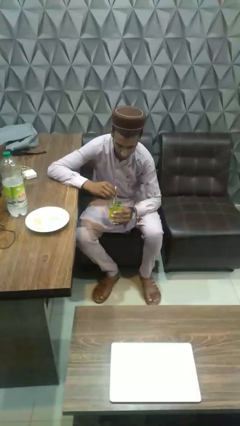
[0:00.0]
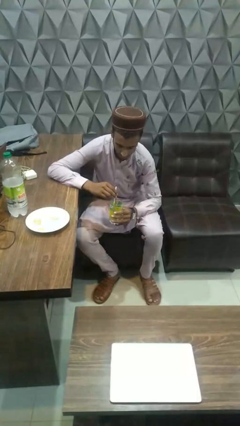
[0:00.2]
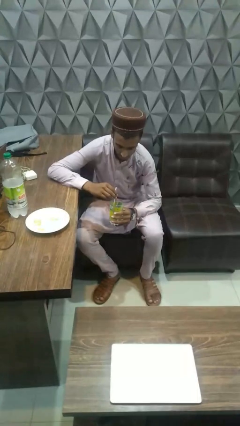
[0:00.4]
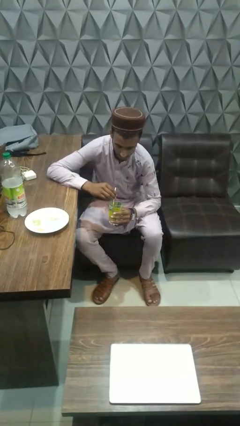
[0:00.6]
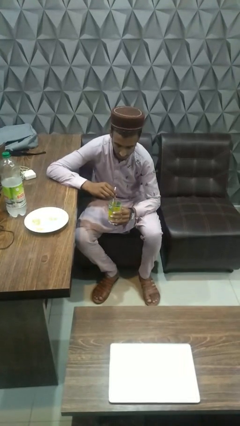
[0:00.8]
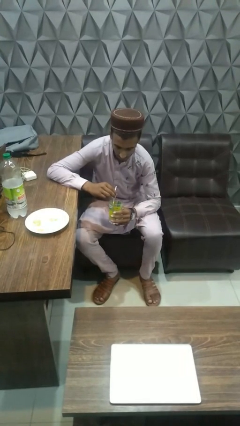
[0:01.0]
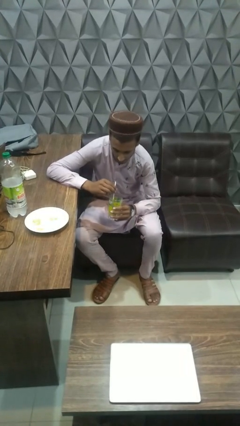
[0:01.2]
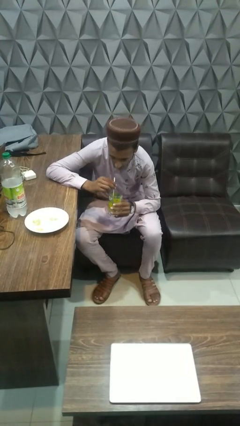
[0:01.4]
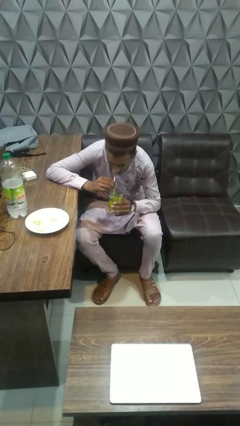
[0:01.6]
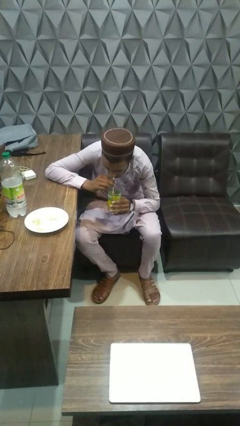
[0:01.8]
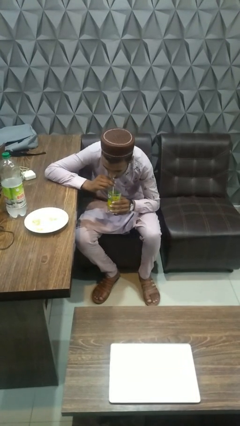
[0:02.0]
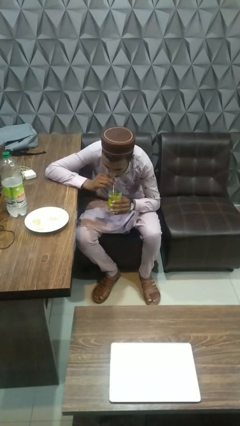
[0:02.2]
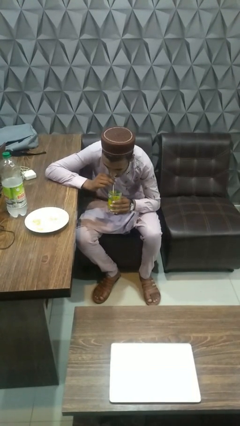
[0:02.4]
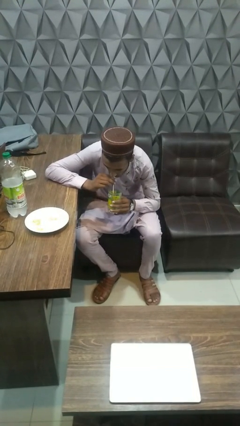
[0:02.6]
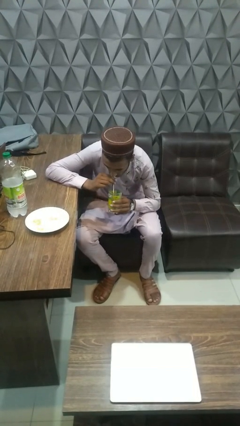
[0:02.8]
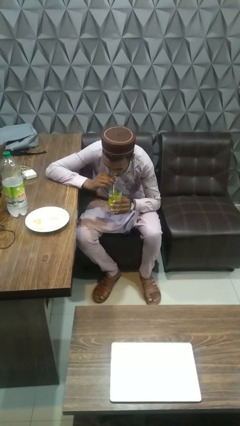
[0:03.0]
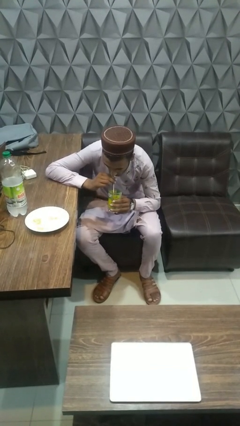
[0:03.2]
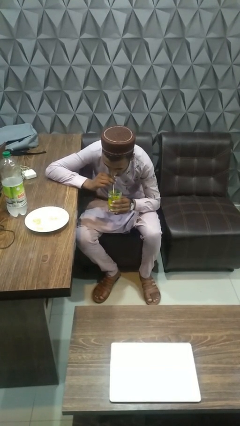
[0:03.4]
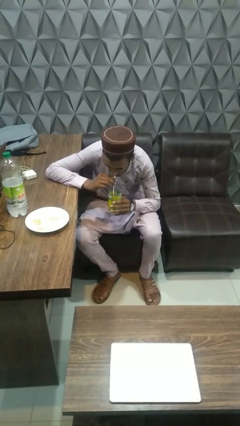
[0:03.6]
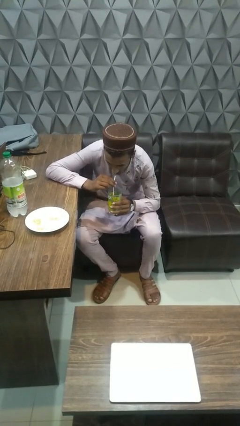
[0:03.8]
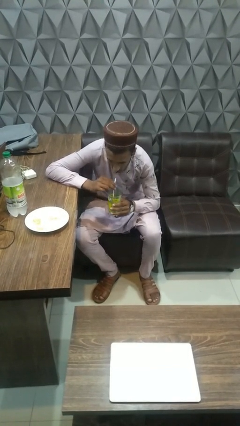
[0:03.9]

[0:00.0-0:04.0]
person drinks from straw

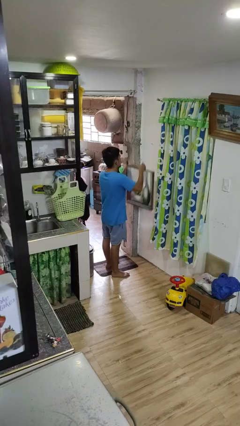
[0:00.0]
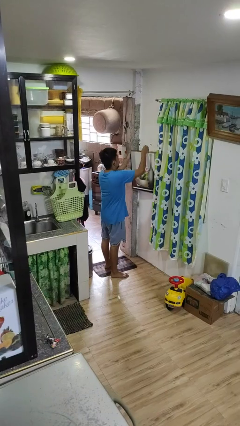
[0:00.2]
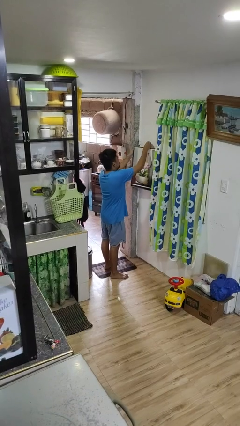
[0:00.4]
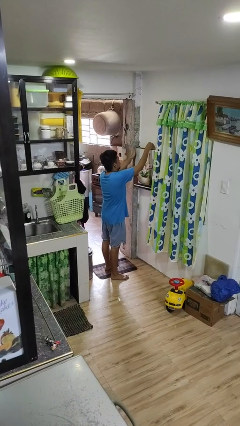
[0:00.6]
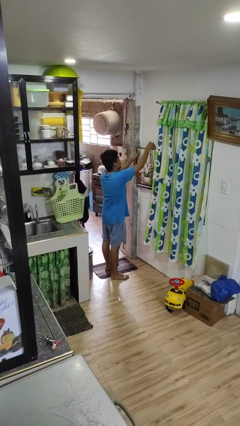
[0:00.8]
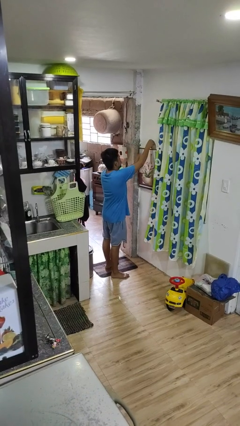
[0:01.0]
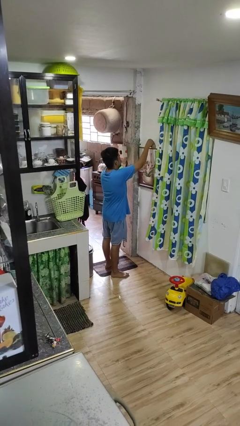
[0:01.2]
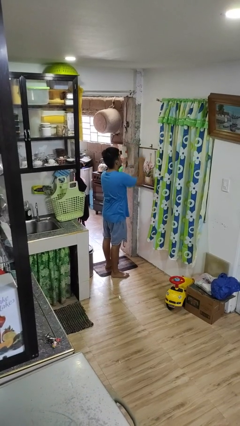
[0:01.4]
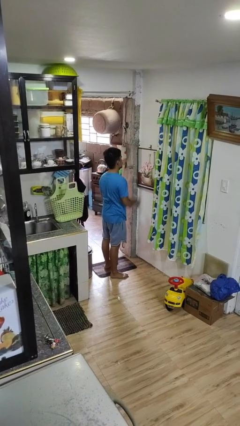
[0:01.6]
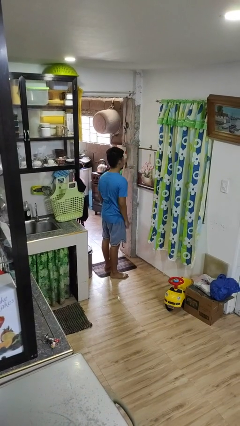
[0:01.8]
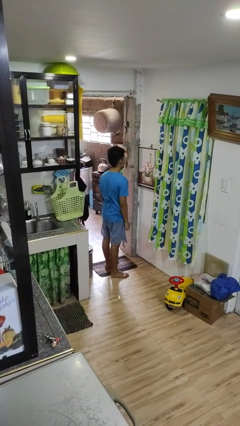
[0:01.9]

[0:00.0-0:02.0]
person puts up picture frame

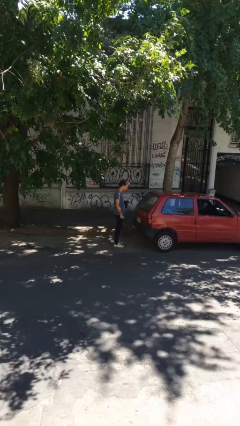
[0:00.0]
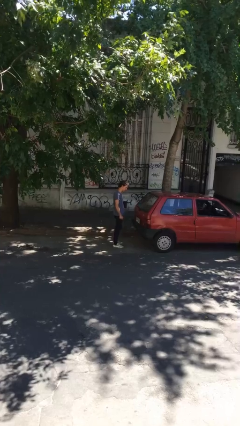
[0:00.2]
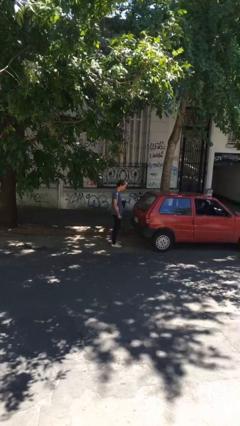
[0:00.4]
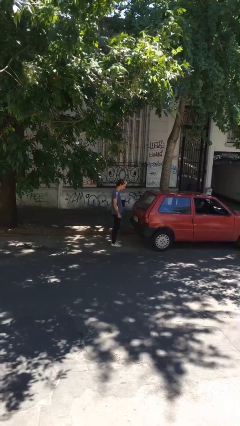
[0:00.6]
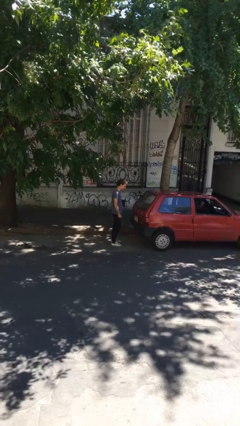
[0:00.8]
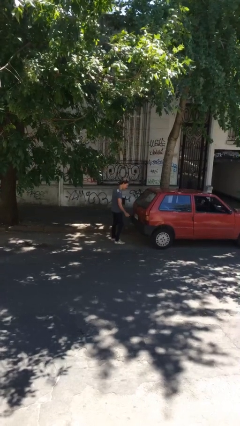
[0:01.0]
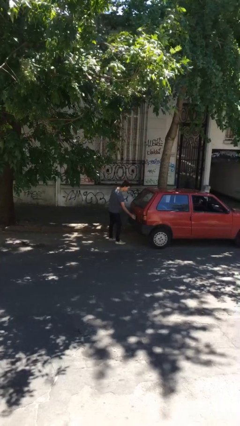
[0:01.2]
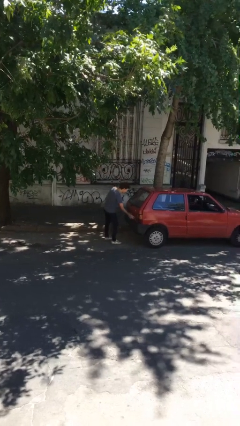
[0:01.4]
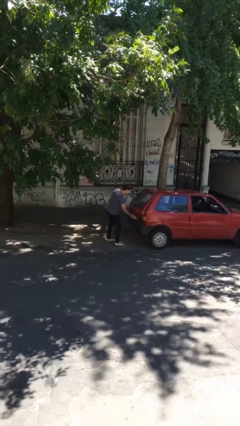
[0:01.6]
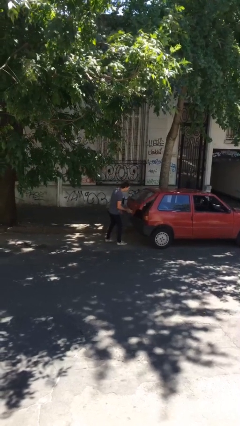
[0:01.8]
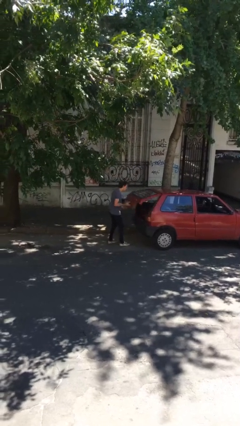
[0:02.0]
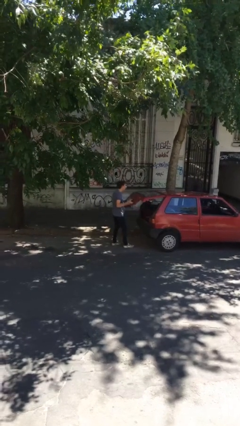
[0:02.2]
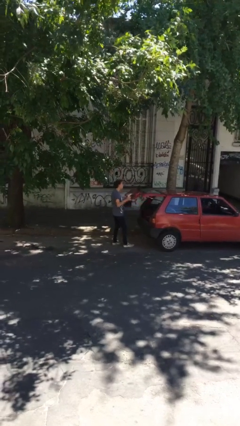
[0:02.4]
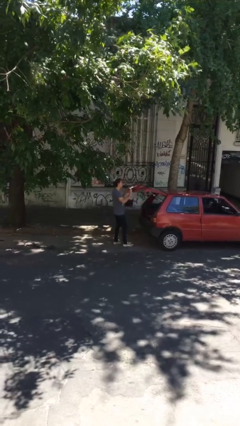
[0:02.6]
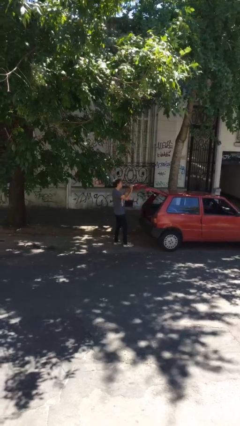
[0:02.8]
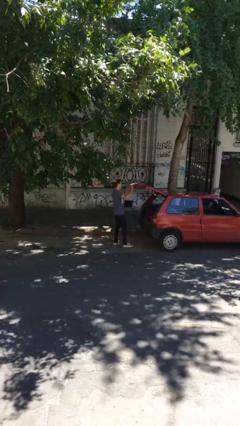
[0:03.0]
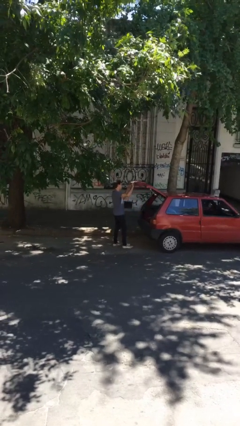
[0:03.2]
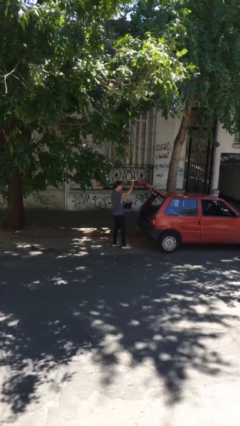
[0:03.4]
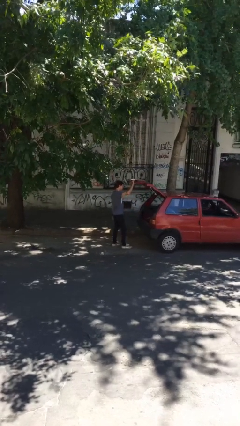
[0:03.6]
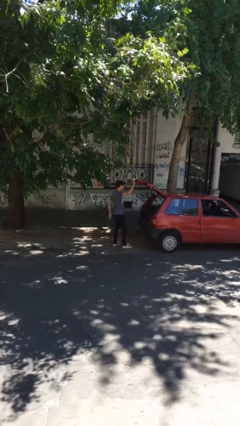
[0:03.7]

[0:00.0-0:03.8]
person opens car trunk

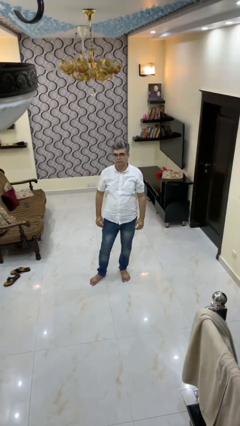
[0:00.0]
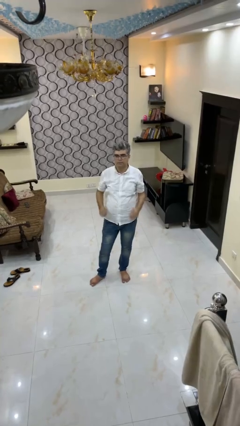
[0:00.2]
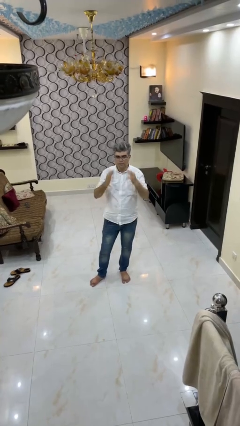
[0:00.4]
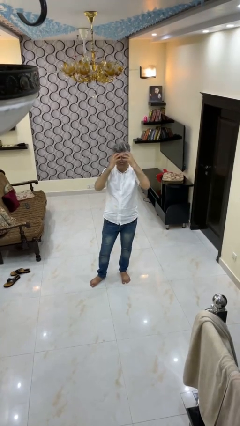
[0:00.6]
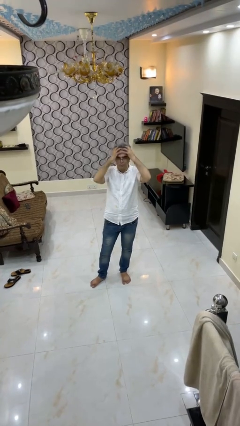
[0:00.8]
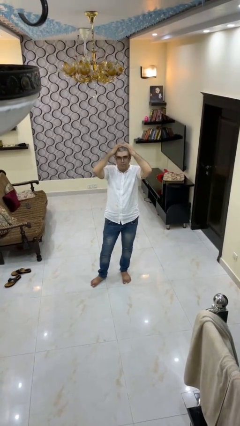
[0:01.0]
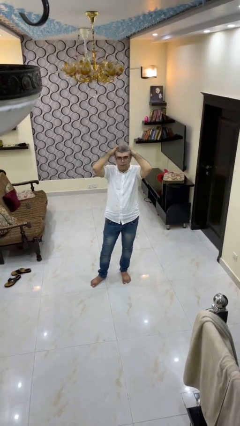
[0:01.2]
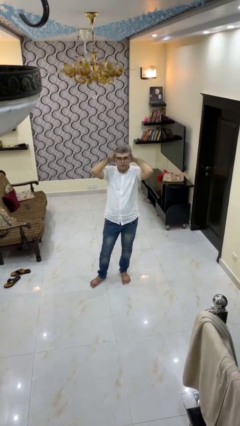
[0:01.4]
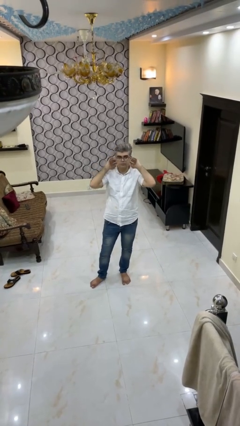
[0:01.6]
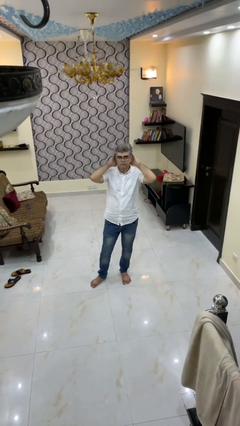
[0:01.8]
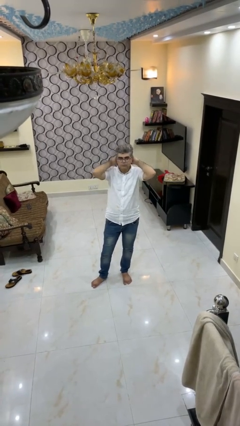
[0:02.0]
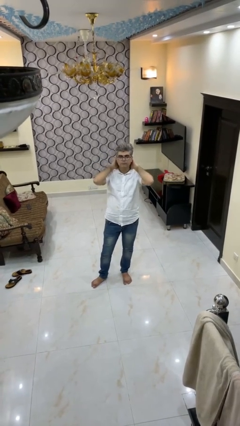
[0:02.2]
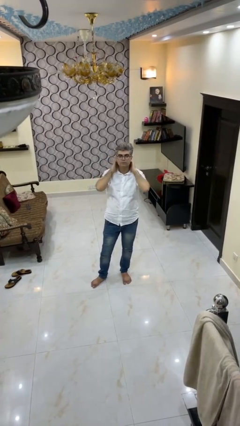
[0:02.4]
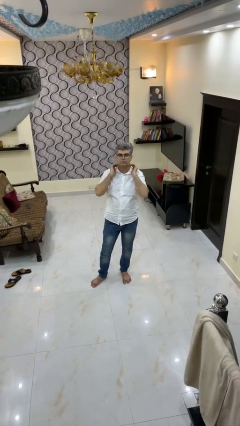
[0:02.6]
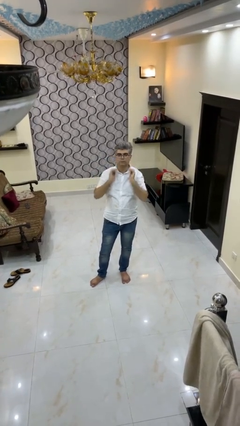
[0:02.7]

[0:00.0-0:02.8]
person strokes hair

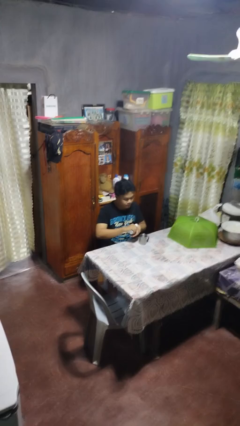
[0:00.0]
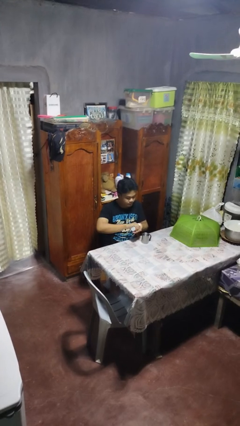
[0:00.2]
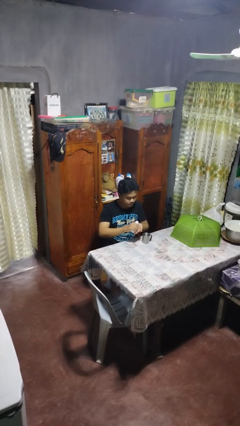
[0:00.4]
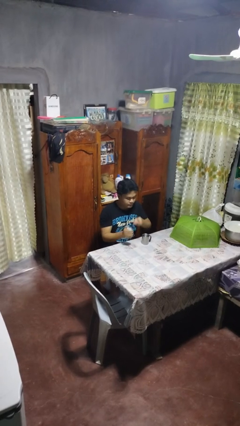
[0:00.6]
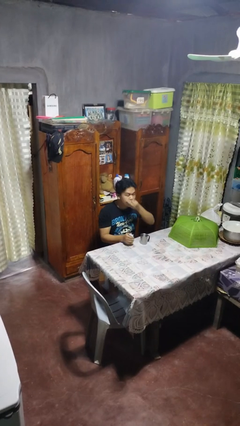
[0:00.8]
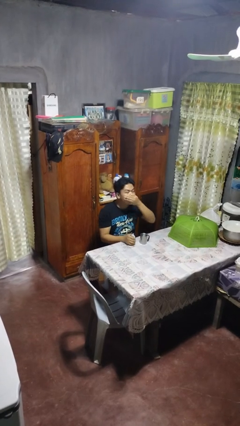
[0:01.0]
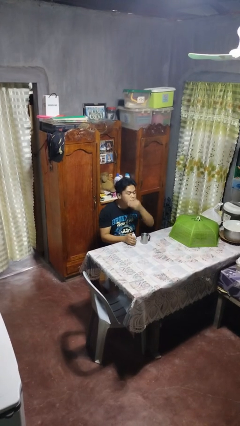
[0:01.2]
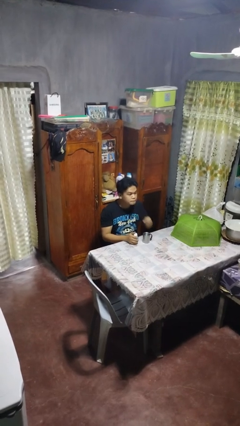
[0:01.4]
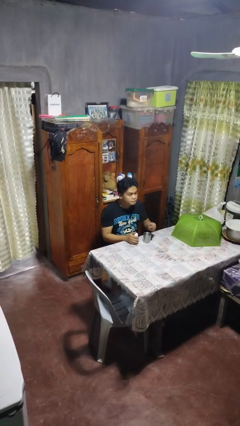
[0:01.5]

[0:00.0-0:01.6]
person takes medicine pills

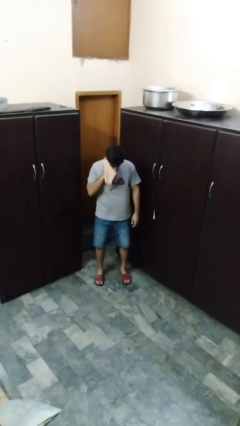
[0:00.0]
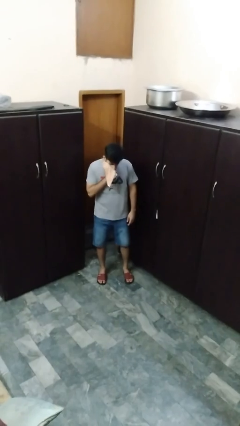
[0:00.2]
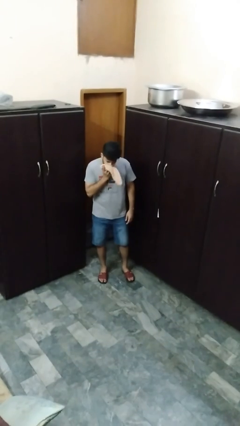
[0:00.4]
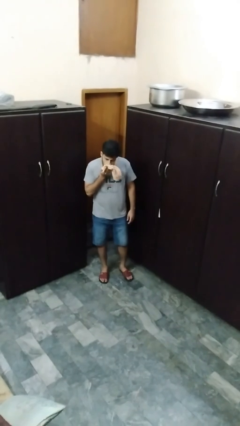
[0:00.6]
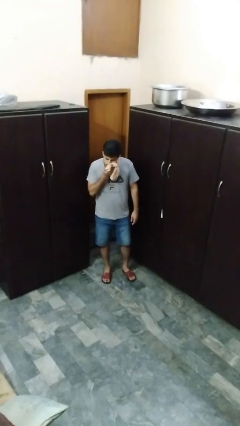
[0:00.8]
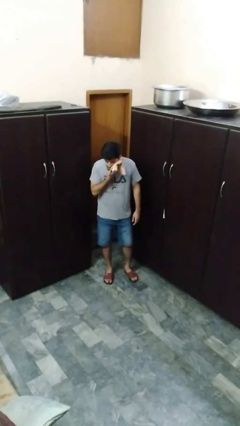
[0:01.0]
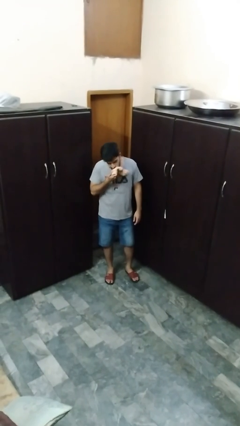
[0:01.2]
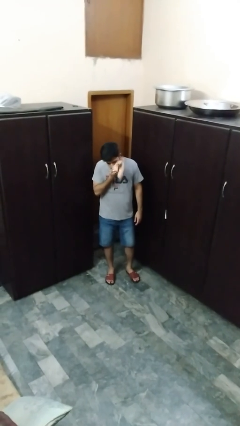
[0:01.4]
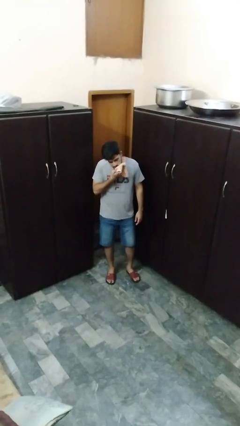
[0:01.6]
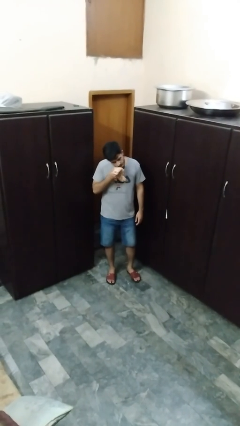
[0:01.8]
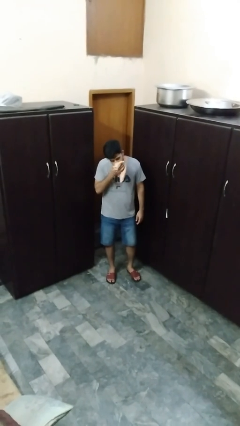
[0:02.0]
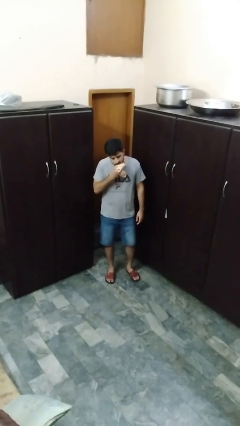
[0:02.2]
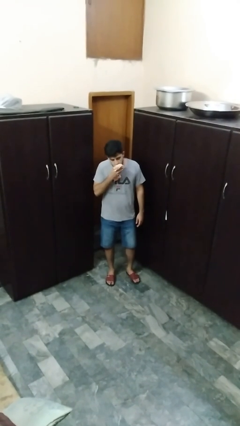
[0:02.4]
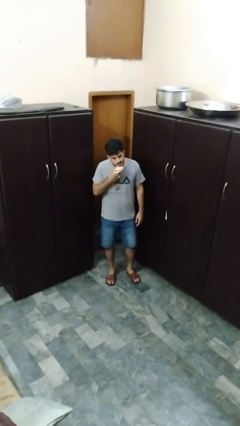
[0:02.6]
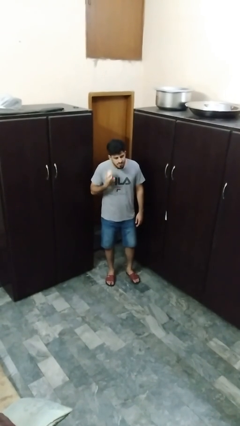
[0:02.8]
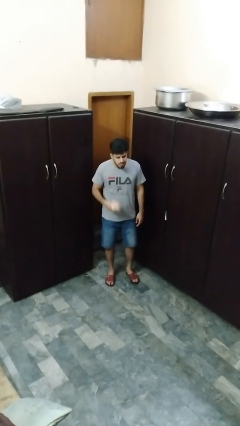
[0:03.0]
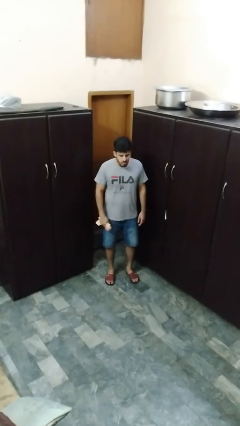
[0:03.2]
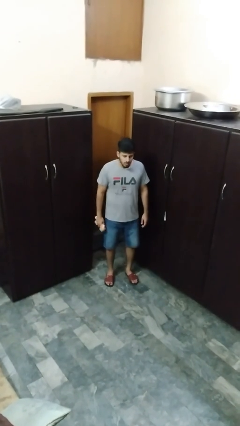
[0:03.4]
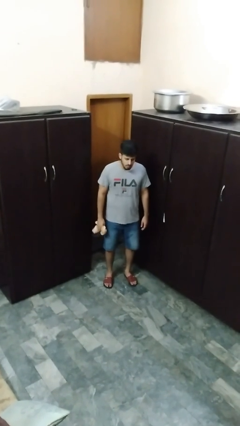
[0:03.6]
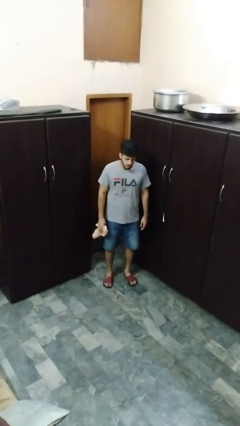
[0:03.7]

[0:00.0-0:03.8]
person wipes mouth with napkin
